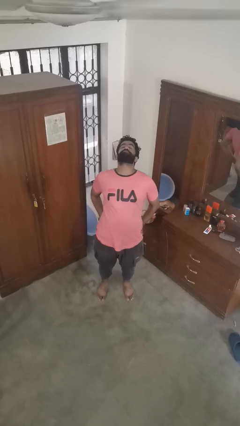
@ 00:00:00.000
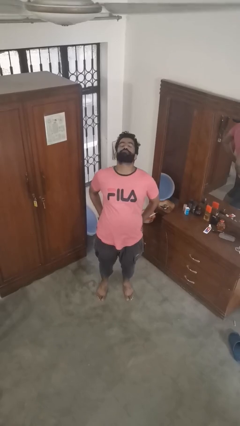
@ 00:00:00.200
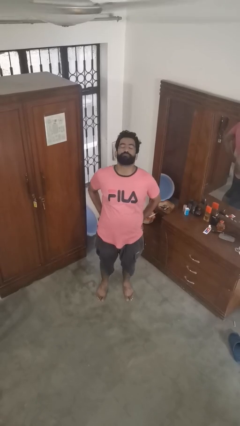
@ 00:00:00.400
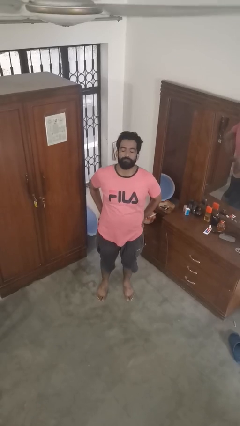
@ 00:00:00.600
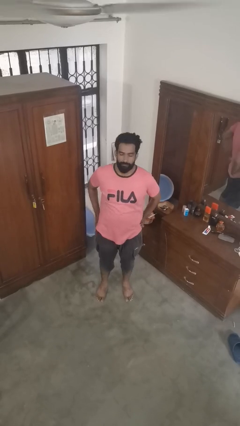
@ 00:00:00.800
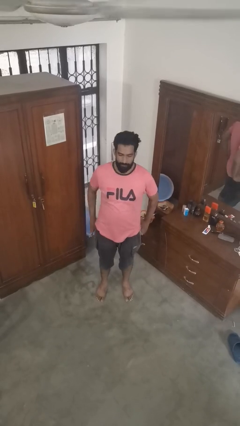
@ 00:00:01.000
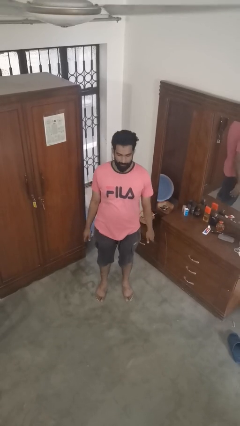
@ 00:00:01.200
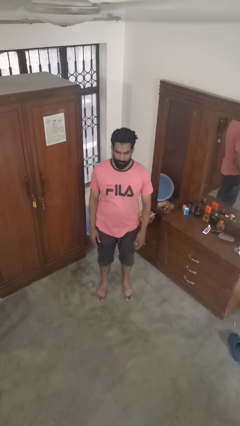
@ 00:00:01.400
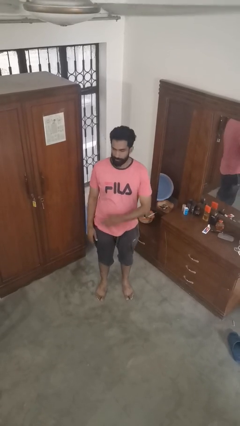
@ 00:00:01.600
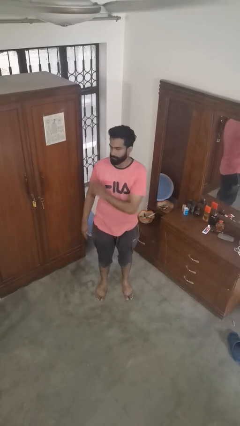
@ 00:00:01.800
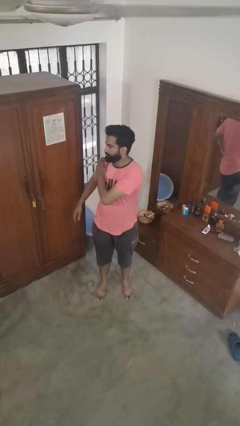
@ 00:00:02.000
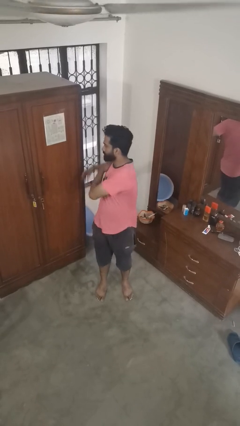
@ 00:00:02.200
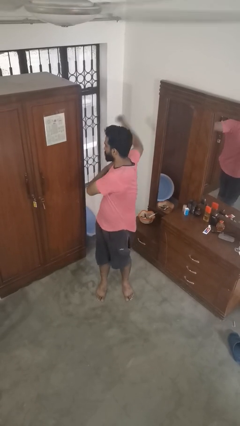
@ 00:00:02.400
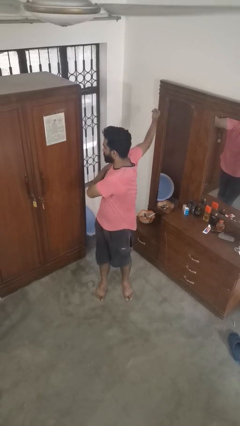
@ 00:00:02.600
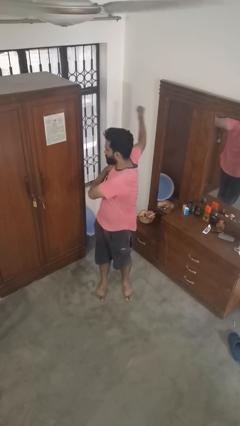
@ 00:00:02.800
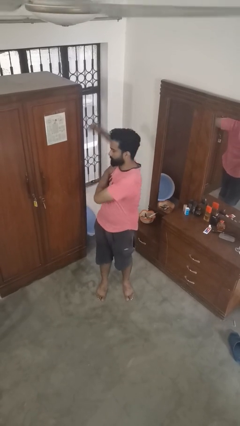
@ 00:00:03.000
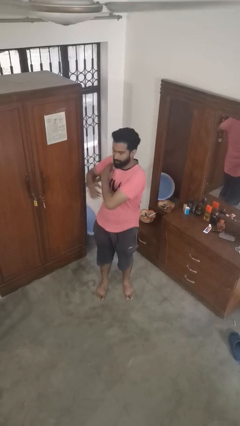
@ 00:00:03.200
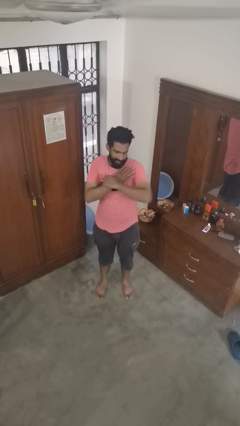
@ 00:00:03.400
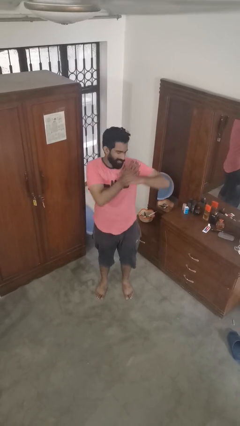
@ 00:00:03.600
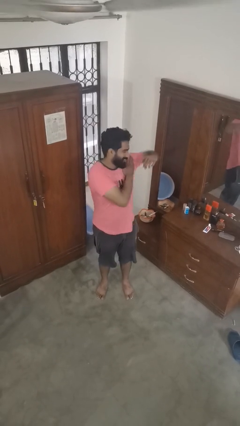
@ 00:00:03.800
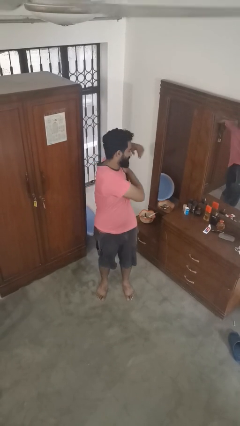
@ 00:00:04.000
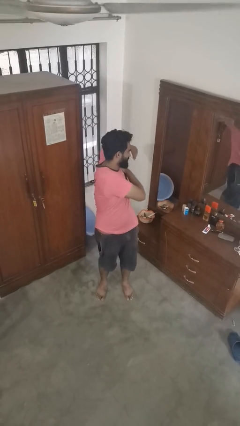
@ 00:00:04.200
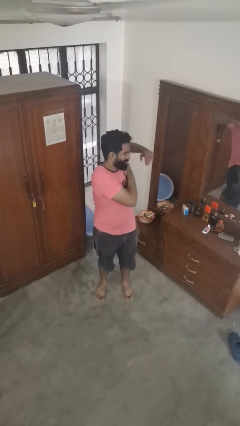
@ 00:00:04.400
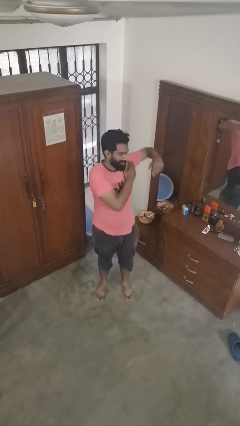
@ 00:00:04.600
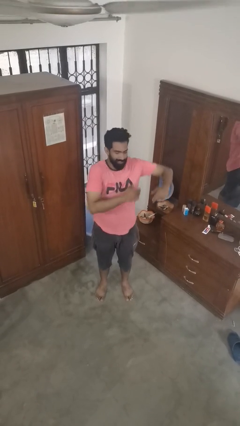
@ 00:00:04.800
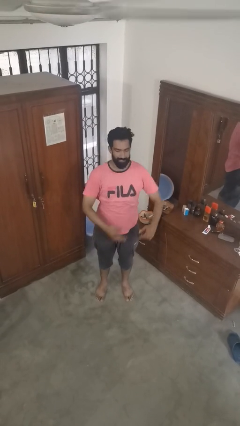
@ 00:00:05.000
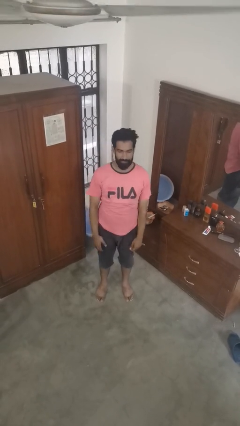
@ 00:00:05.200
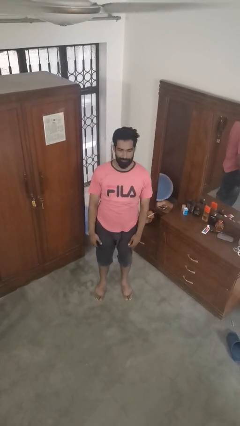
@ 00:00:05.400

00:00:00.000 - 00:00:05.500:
person stretches arms to side

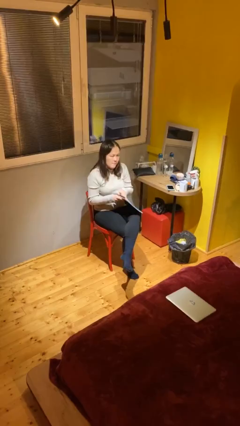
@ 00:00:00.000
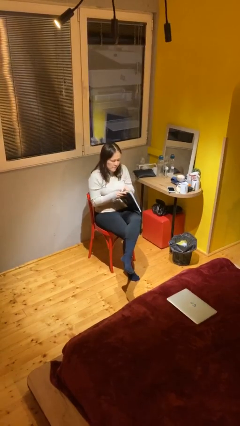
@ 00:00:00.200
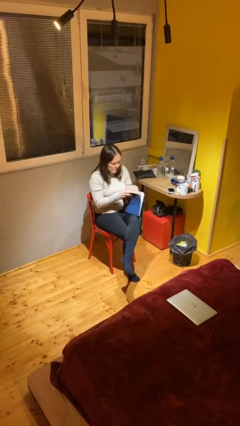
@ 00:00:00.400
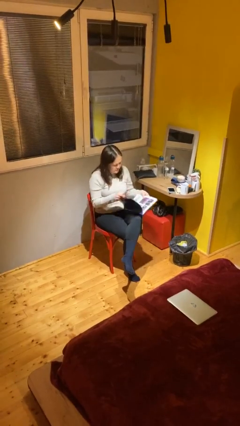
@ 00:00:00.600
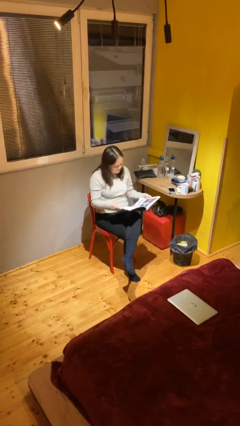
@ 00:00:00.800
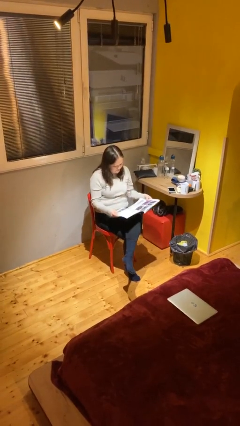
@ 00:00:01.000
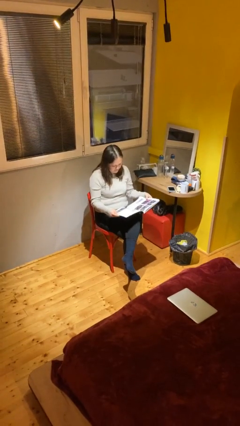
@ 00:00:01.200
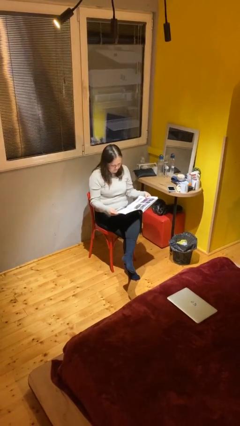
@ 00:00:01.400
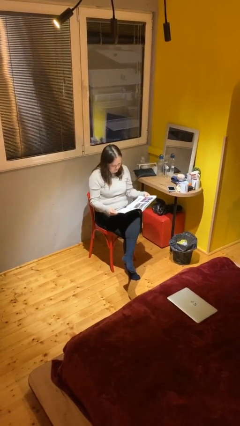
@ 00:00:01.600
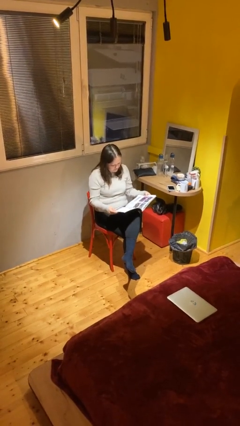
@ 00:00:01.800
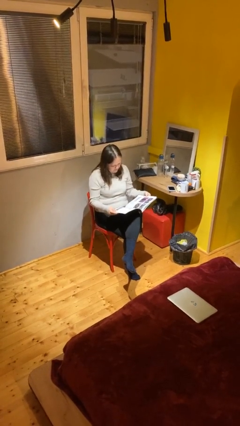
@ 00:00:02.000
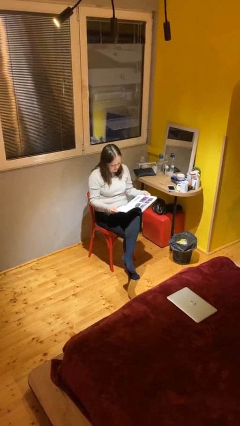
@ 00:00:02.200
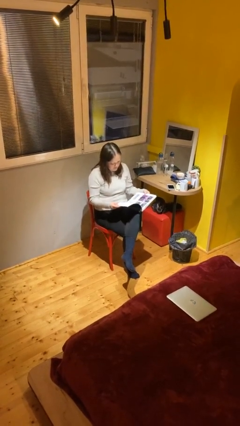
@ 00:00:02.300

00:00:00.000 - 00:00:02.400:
person reads document

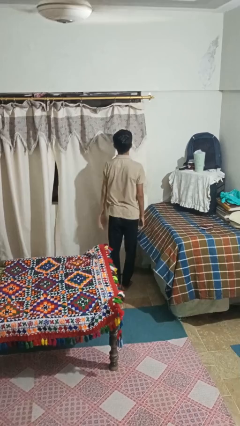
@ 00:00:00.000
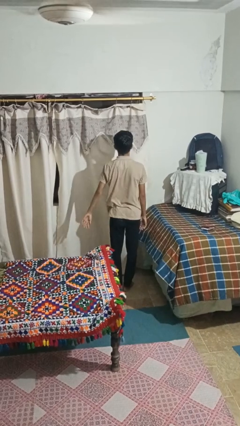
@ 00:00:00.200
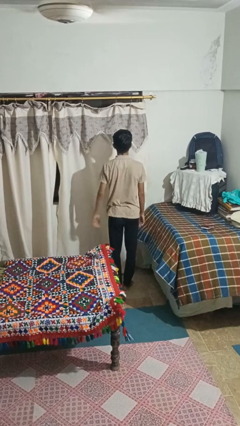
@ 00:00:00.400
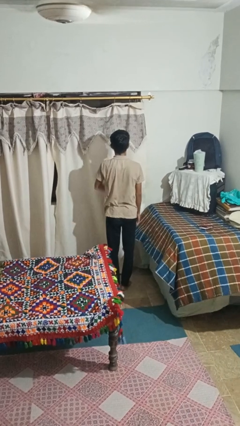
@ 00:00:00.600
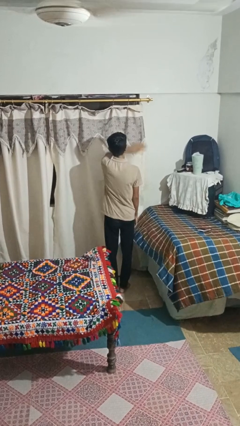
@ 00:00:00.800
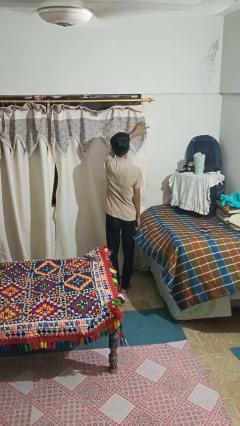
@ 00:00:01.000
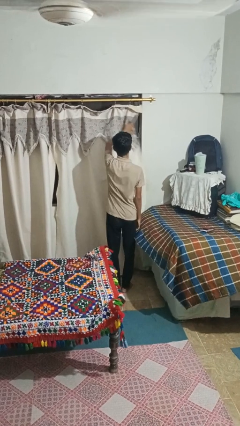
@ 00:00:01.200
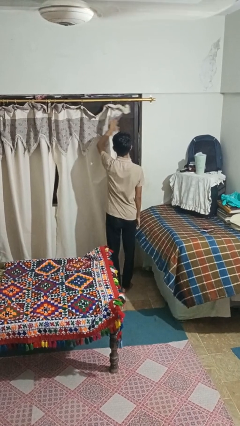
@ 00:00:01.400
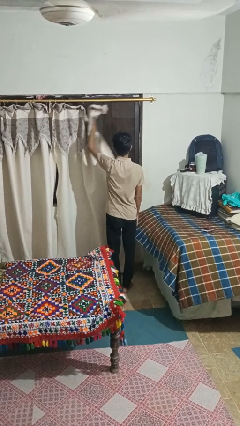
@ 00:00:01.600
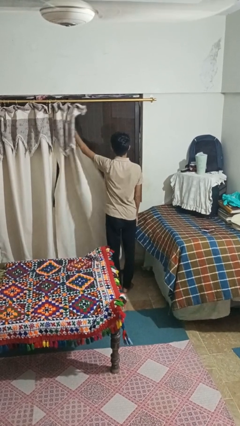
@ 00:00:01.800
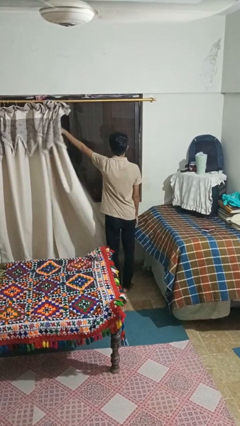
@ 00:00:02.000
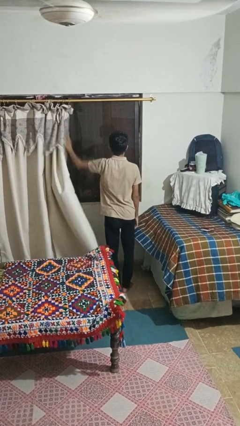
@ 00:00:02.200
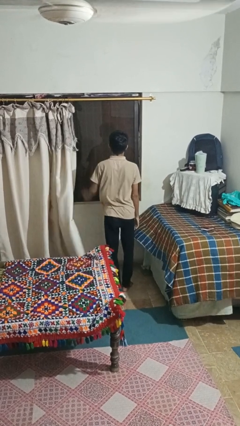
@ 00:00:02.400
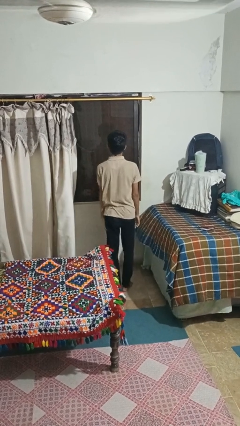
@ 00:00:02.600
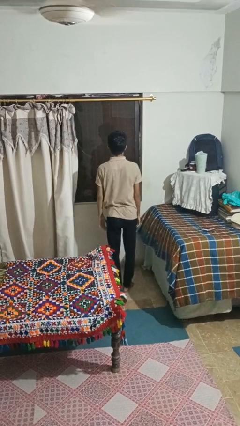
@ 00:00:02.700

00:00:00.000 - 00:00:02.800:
person opens curtains

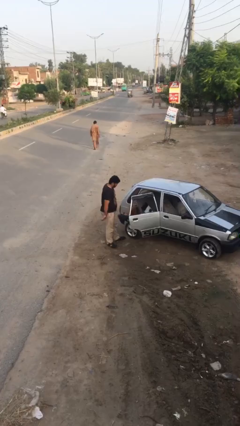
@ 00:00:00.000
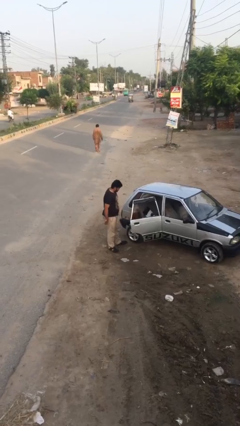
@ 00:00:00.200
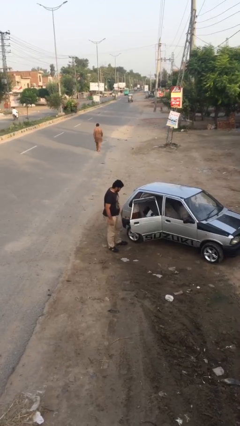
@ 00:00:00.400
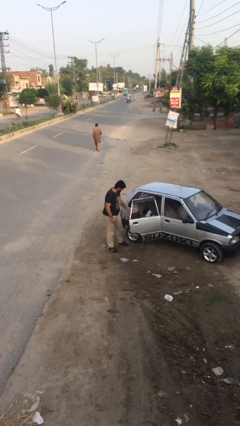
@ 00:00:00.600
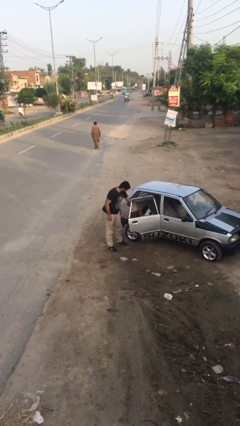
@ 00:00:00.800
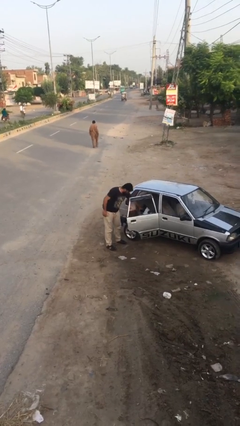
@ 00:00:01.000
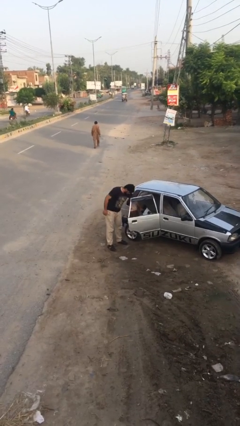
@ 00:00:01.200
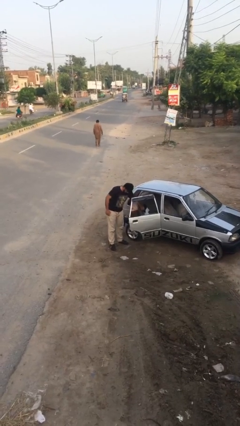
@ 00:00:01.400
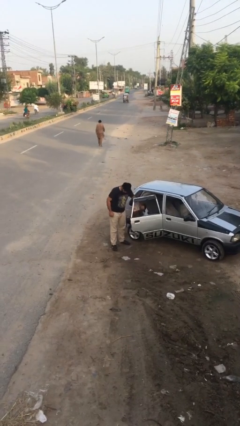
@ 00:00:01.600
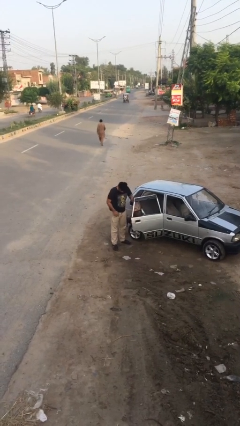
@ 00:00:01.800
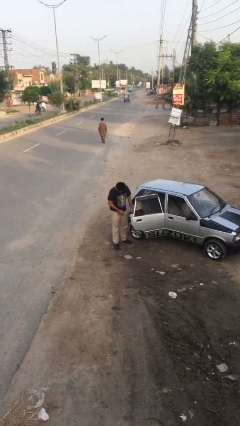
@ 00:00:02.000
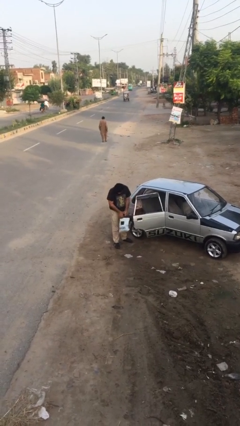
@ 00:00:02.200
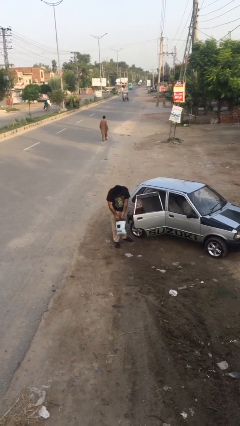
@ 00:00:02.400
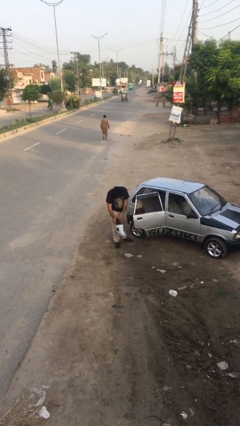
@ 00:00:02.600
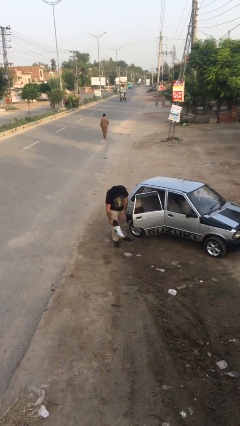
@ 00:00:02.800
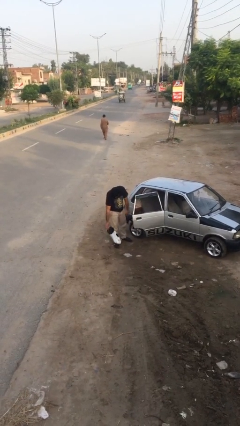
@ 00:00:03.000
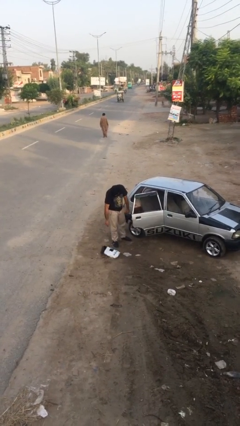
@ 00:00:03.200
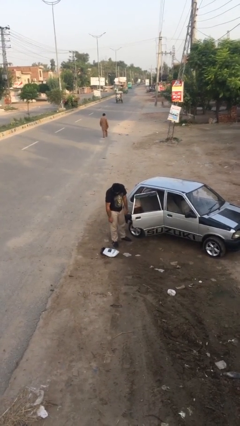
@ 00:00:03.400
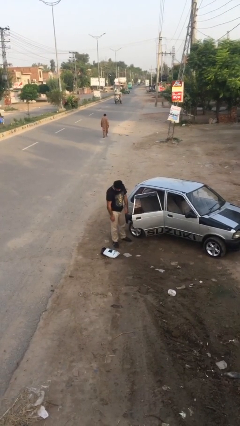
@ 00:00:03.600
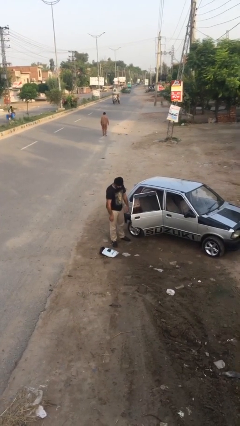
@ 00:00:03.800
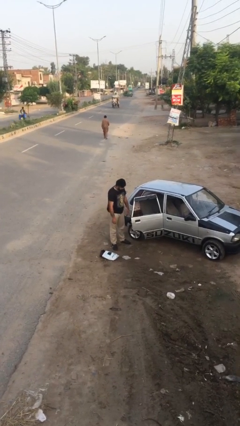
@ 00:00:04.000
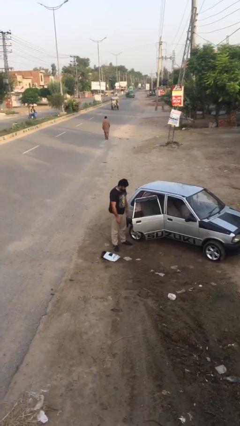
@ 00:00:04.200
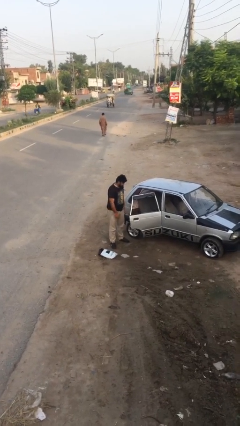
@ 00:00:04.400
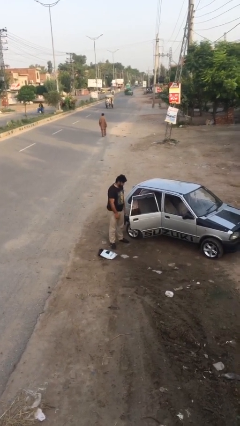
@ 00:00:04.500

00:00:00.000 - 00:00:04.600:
person unloads car

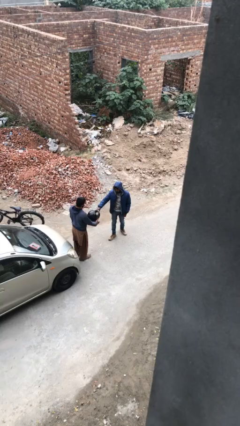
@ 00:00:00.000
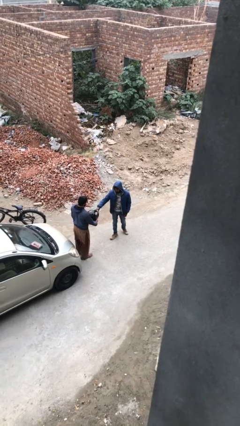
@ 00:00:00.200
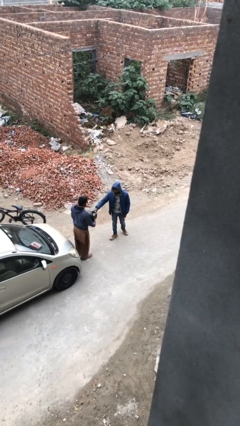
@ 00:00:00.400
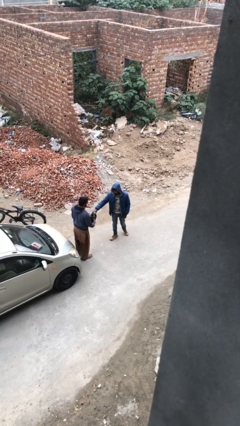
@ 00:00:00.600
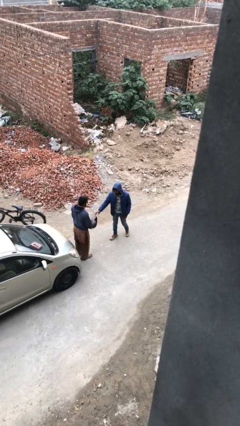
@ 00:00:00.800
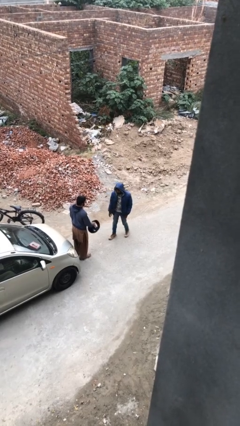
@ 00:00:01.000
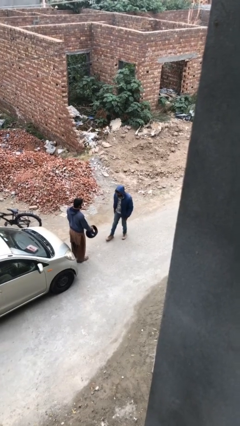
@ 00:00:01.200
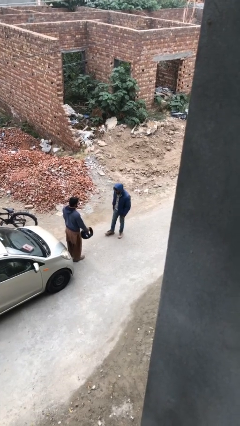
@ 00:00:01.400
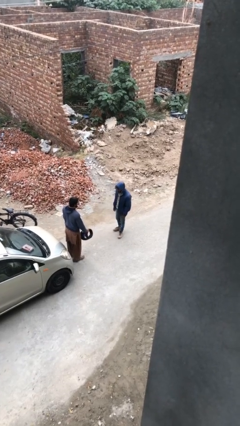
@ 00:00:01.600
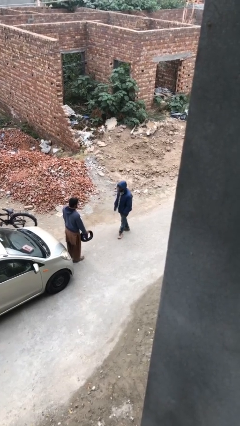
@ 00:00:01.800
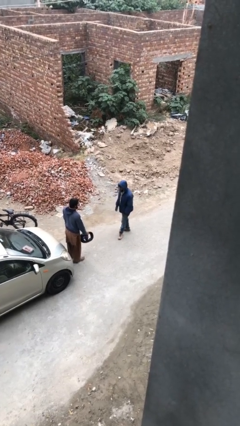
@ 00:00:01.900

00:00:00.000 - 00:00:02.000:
person transfers object to person
